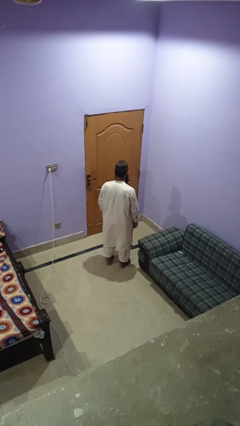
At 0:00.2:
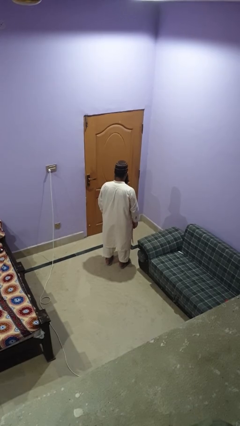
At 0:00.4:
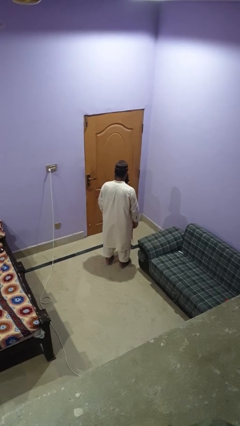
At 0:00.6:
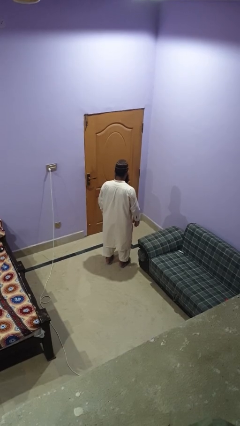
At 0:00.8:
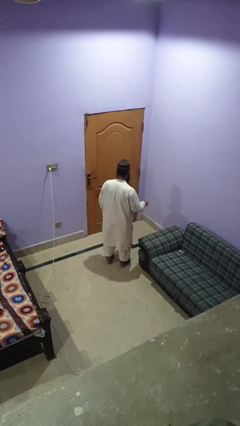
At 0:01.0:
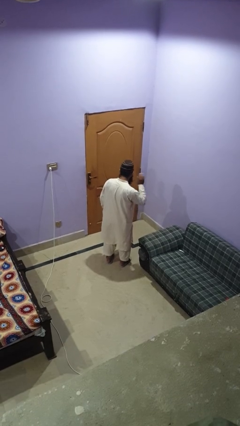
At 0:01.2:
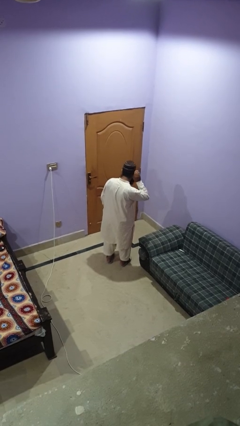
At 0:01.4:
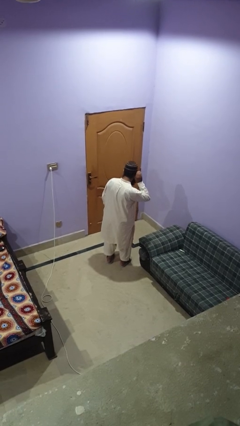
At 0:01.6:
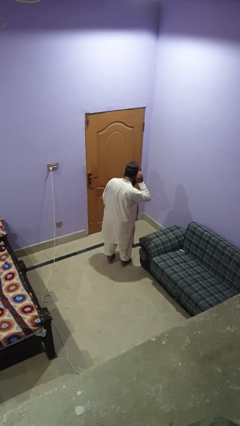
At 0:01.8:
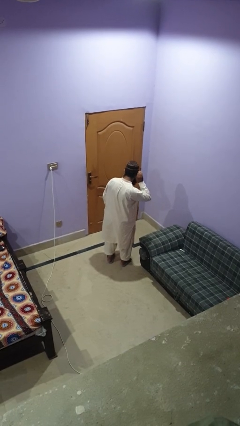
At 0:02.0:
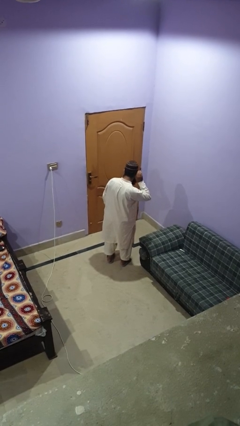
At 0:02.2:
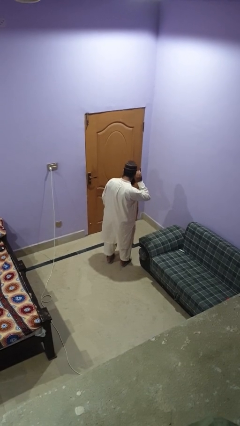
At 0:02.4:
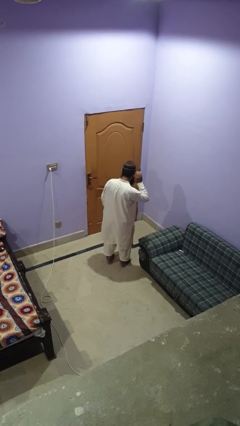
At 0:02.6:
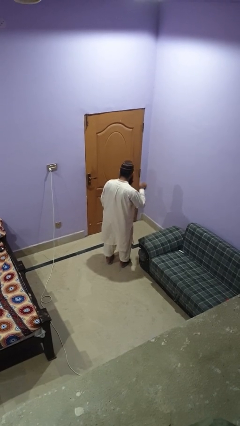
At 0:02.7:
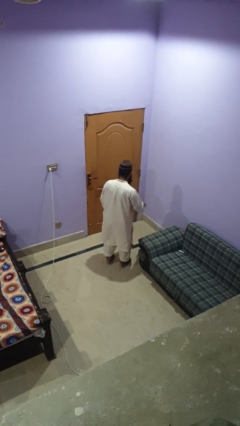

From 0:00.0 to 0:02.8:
person gestures listen closely

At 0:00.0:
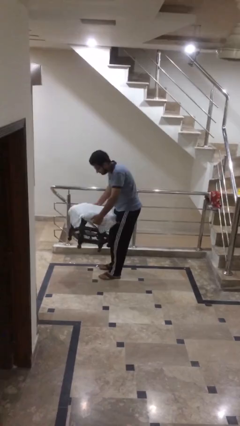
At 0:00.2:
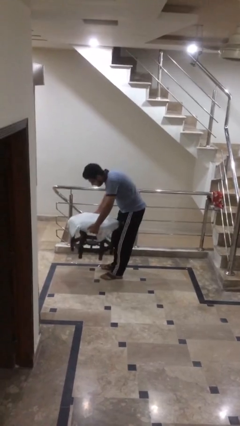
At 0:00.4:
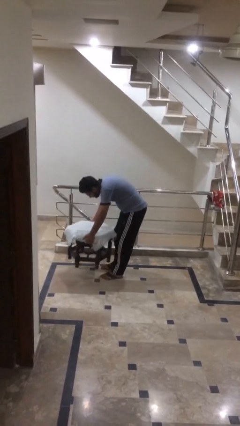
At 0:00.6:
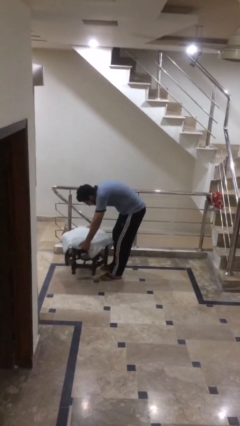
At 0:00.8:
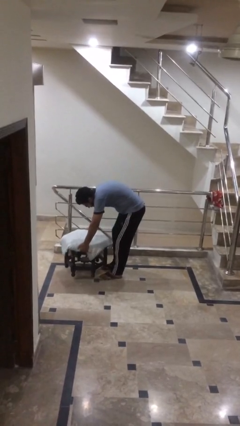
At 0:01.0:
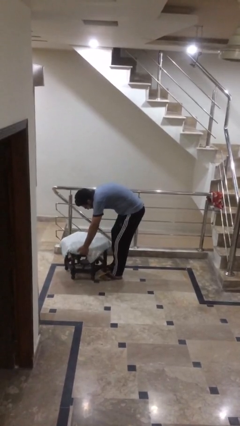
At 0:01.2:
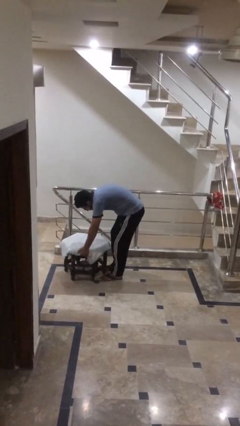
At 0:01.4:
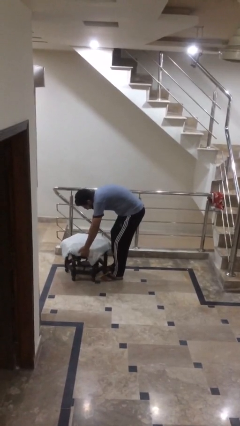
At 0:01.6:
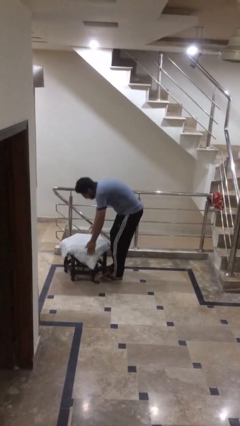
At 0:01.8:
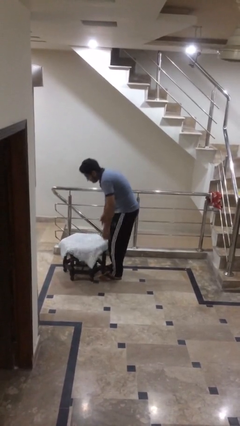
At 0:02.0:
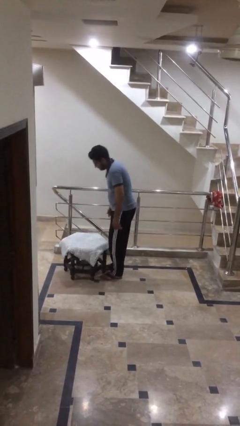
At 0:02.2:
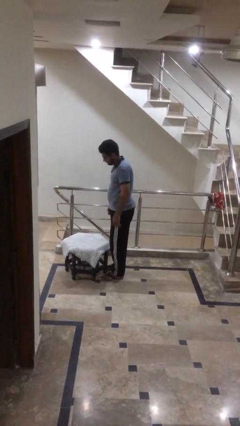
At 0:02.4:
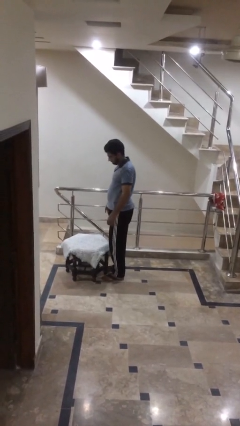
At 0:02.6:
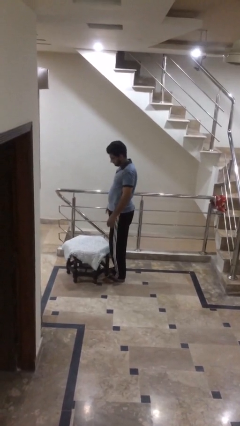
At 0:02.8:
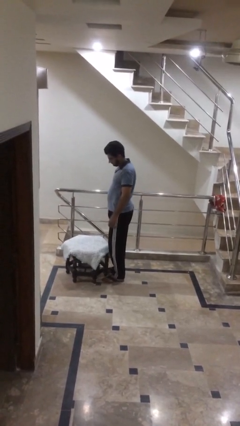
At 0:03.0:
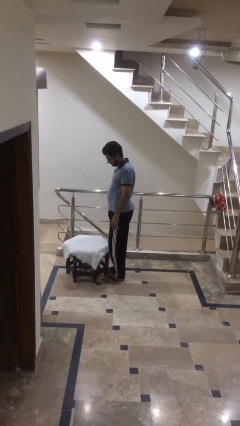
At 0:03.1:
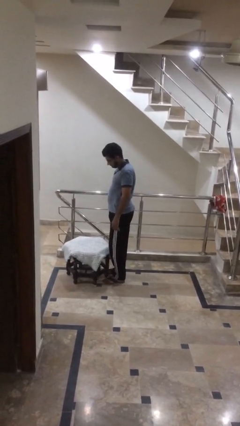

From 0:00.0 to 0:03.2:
person puts down object on floor

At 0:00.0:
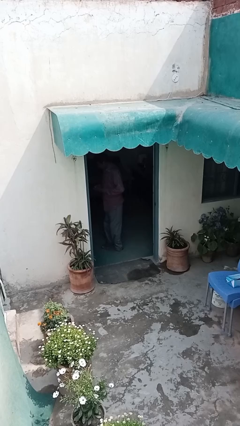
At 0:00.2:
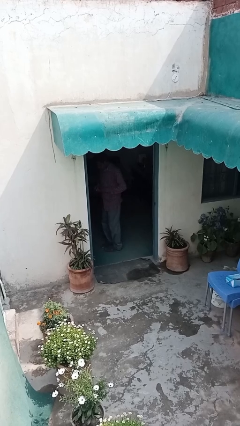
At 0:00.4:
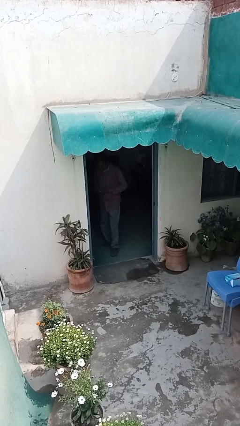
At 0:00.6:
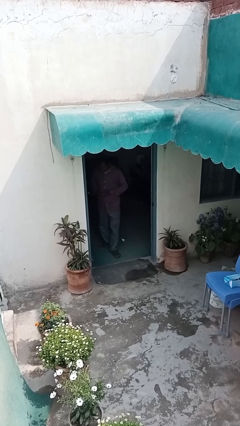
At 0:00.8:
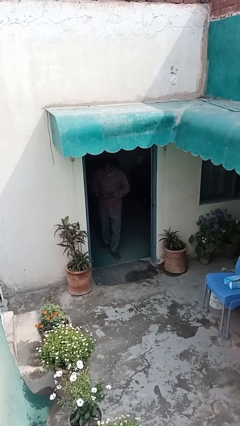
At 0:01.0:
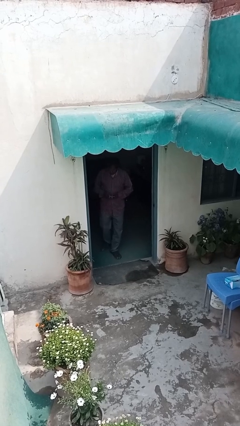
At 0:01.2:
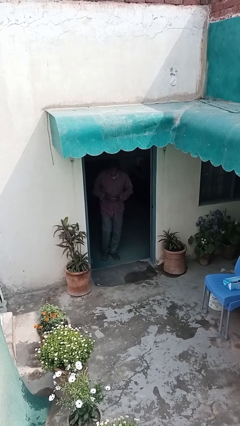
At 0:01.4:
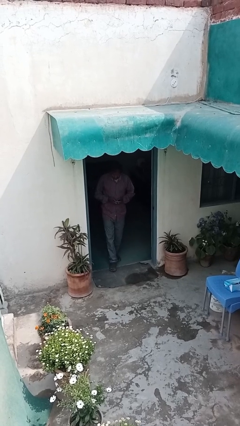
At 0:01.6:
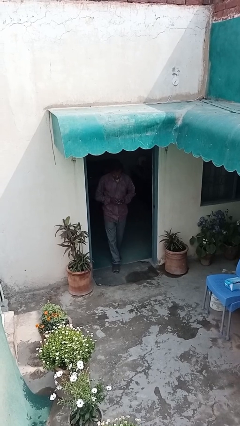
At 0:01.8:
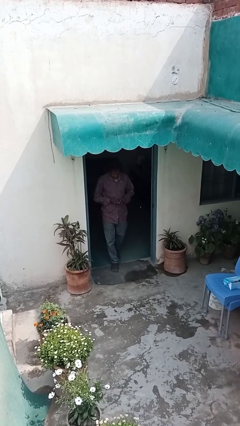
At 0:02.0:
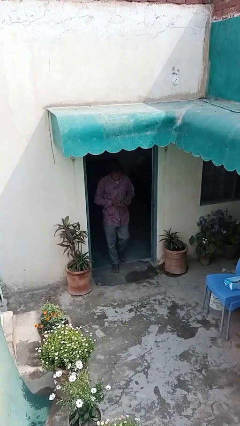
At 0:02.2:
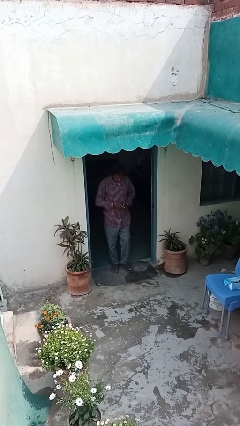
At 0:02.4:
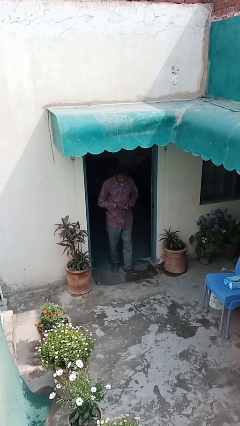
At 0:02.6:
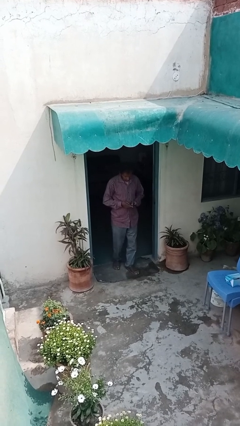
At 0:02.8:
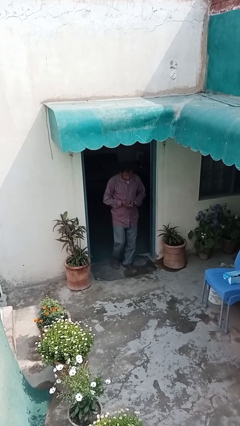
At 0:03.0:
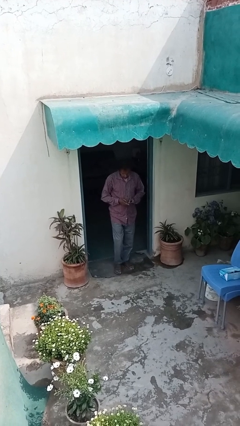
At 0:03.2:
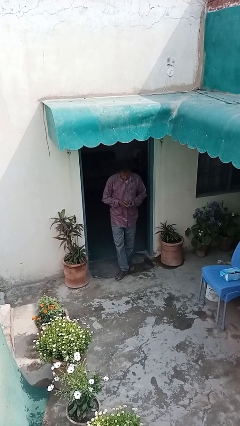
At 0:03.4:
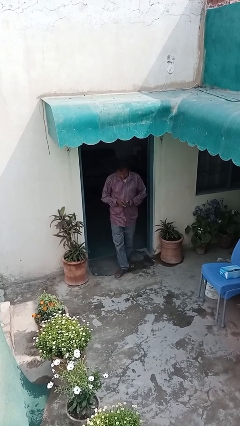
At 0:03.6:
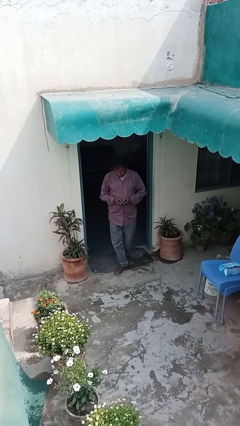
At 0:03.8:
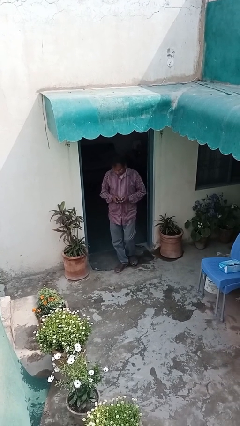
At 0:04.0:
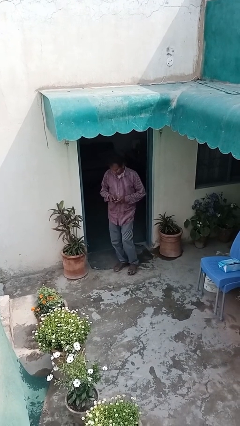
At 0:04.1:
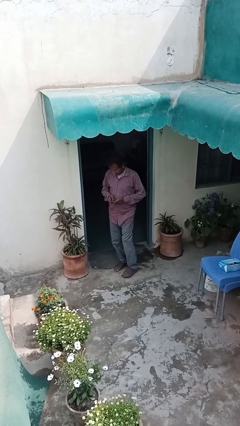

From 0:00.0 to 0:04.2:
person enters scene through structure

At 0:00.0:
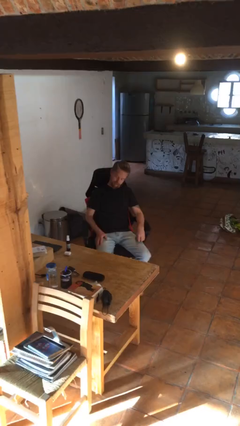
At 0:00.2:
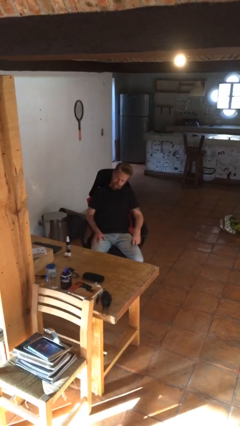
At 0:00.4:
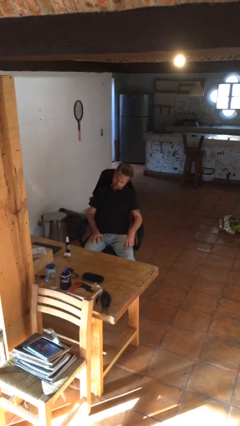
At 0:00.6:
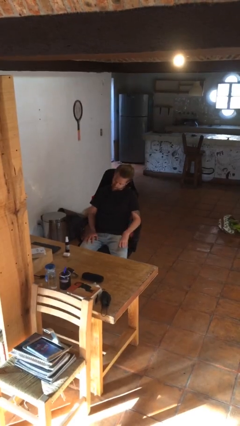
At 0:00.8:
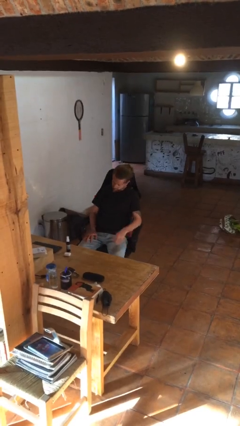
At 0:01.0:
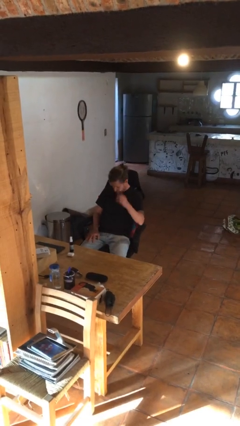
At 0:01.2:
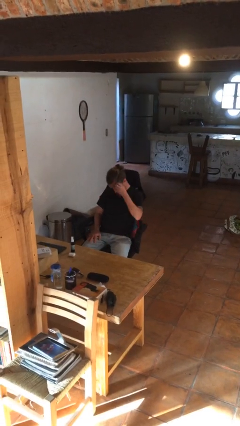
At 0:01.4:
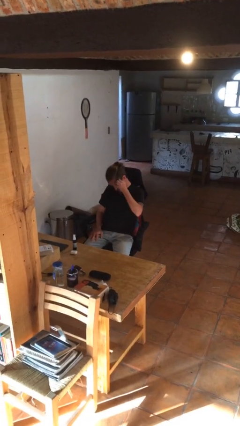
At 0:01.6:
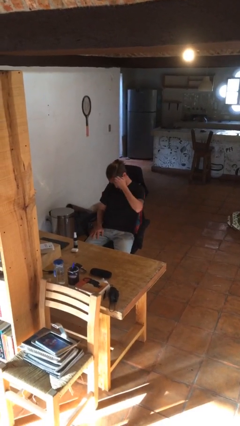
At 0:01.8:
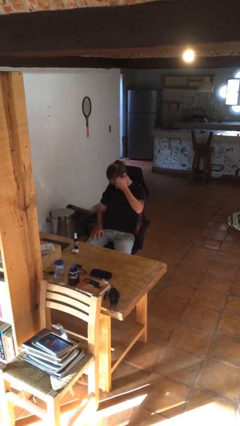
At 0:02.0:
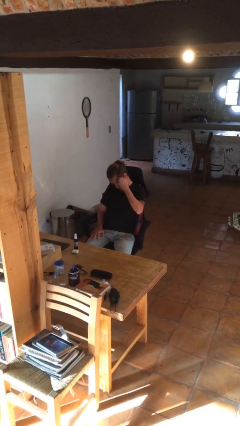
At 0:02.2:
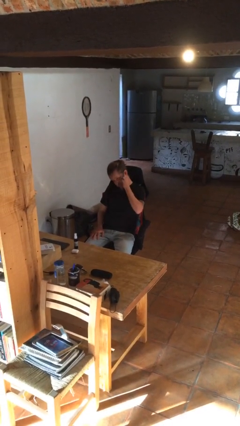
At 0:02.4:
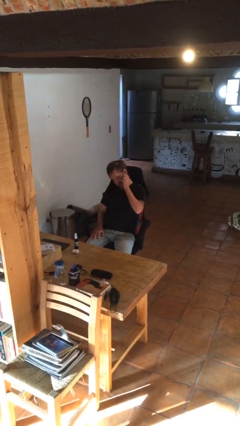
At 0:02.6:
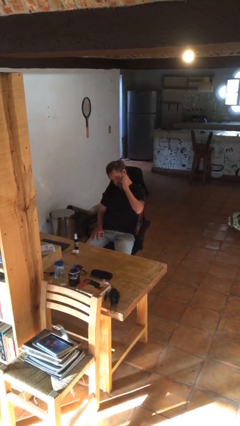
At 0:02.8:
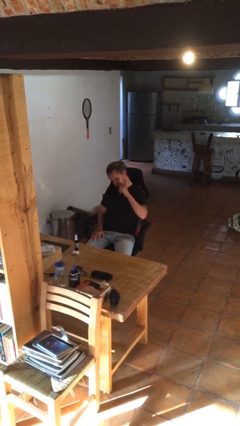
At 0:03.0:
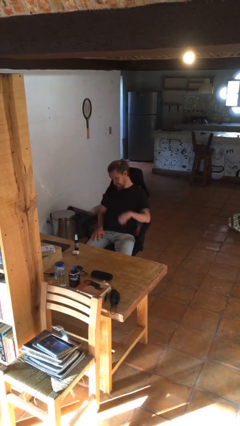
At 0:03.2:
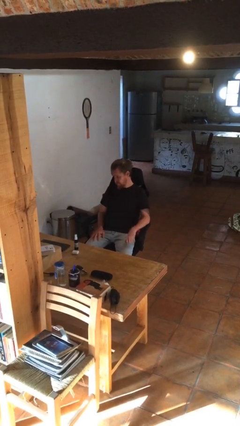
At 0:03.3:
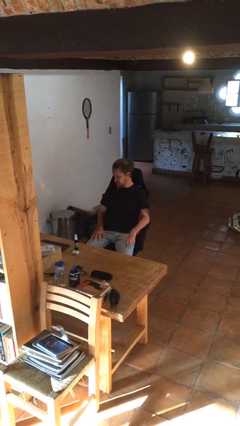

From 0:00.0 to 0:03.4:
person scratches face

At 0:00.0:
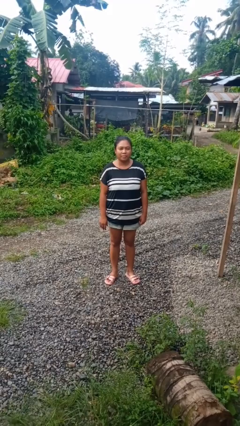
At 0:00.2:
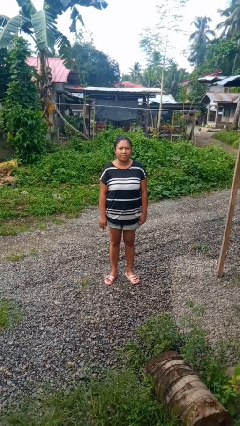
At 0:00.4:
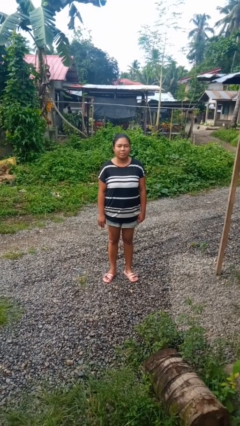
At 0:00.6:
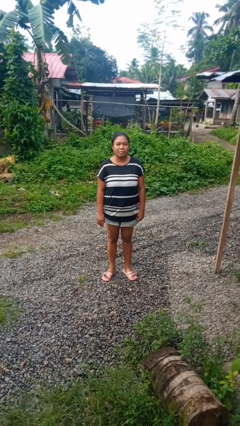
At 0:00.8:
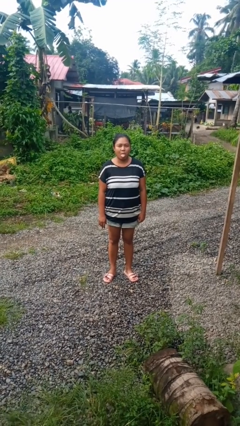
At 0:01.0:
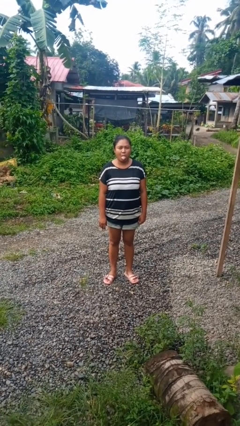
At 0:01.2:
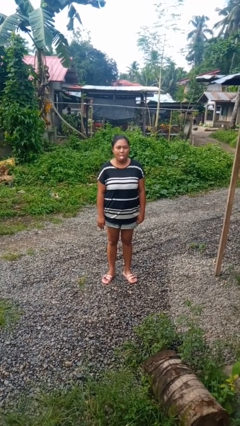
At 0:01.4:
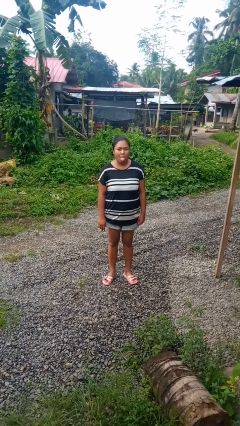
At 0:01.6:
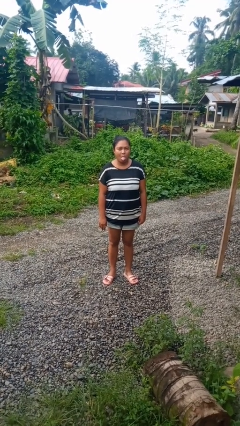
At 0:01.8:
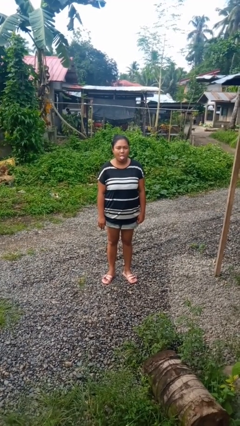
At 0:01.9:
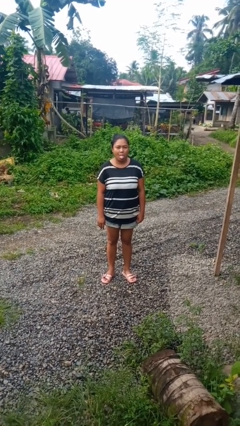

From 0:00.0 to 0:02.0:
person sticks out tongue

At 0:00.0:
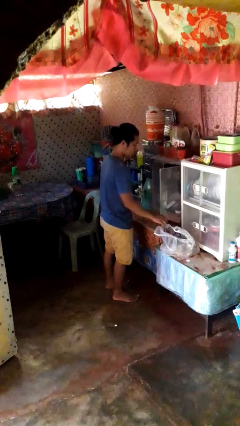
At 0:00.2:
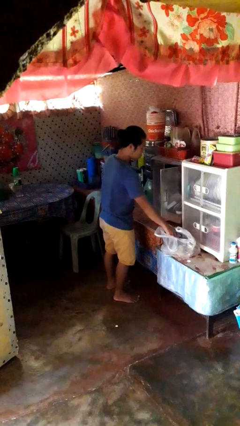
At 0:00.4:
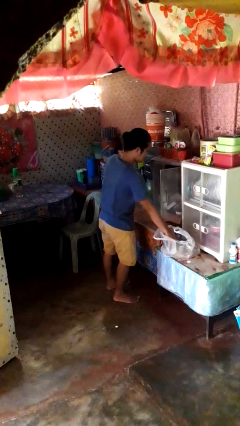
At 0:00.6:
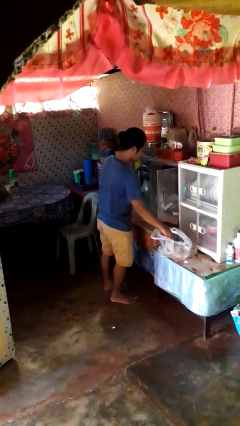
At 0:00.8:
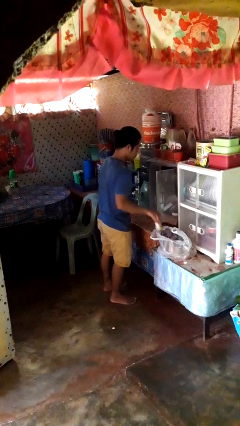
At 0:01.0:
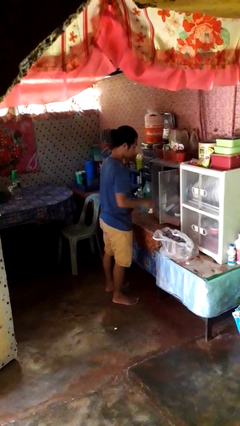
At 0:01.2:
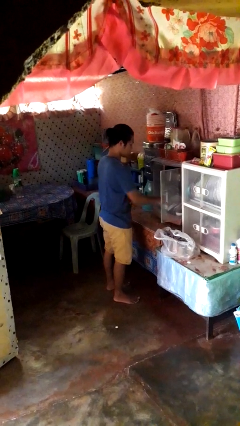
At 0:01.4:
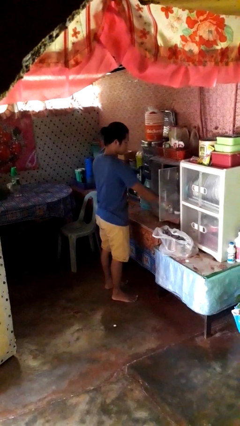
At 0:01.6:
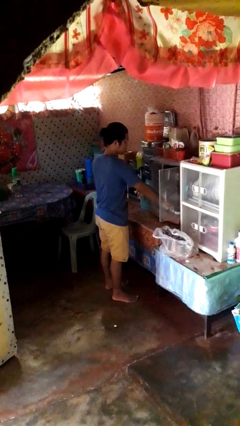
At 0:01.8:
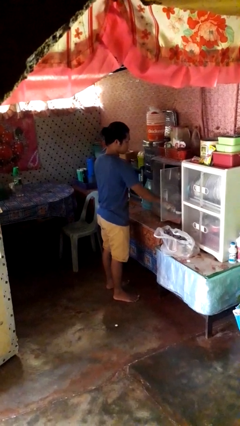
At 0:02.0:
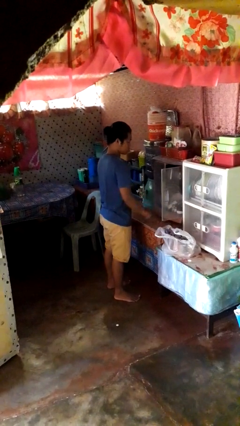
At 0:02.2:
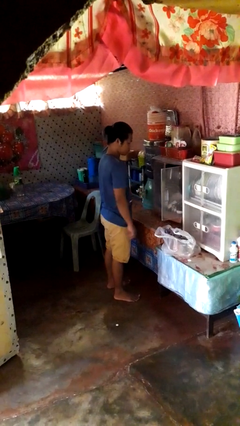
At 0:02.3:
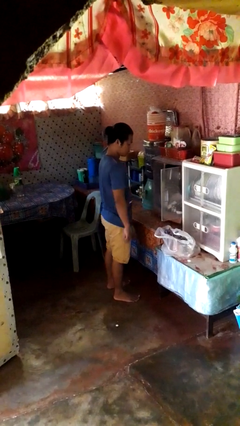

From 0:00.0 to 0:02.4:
person loads groceries into cabinet
